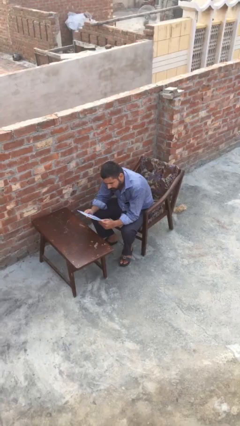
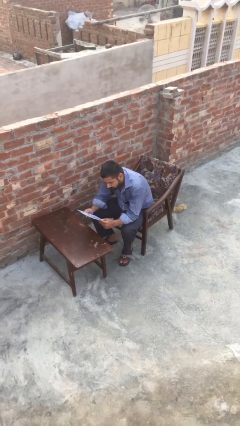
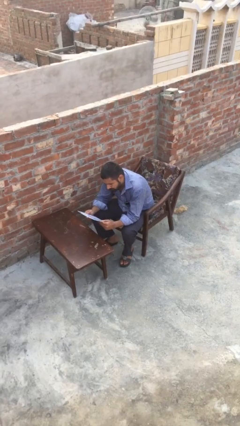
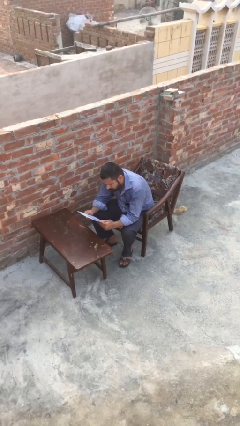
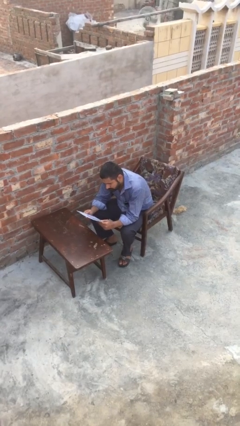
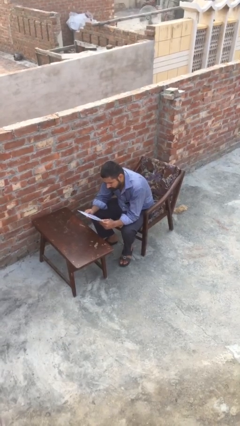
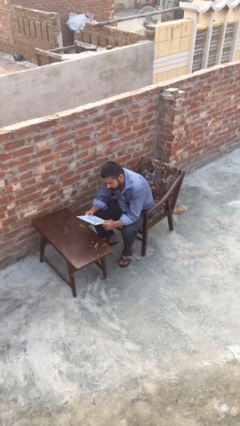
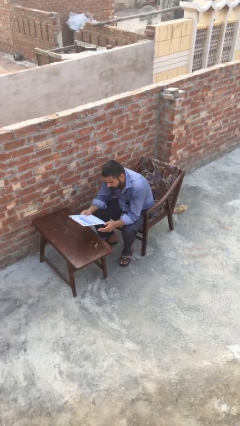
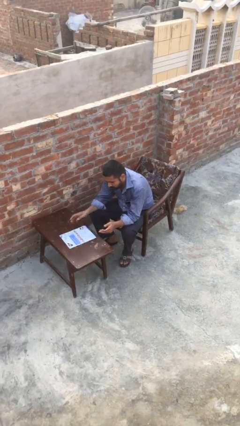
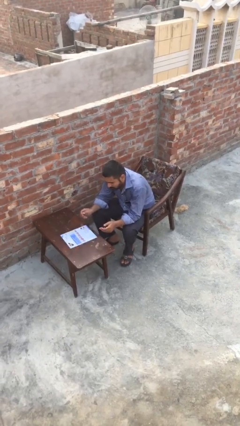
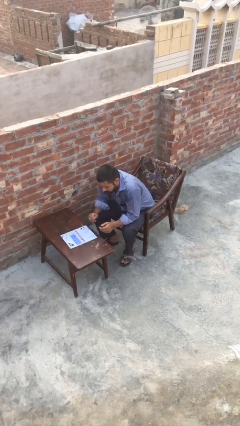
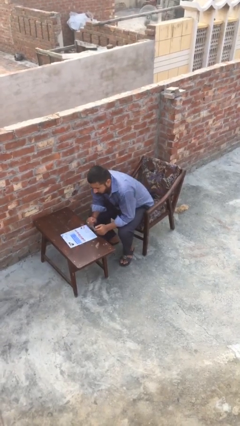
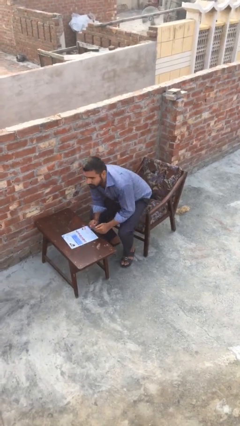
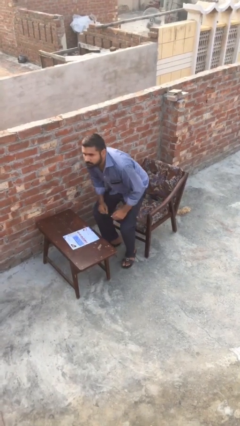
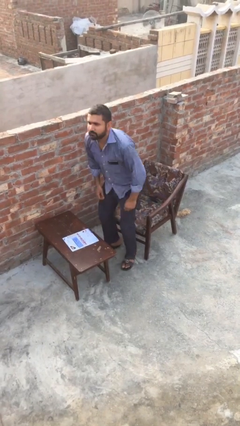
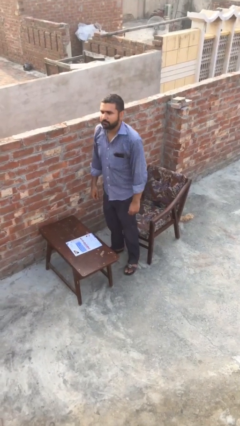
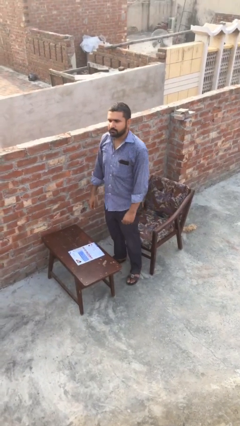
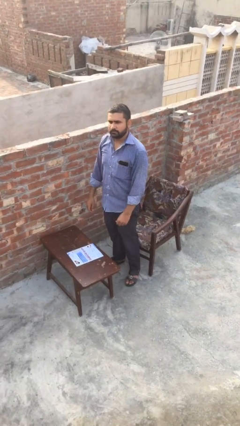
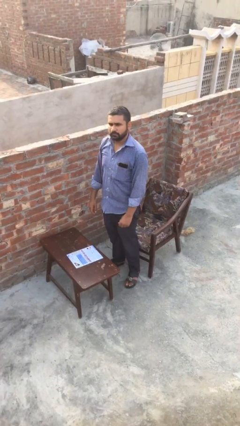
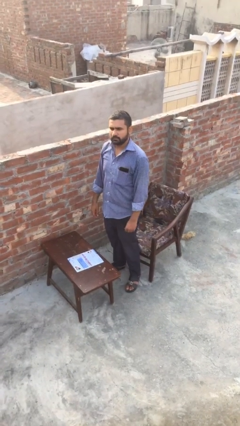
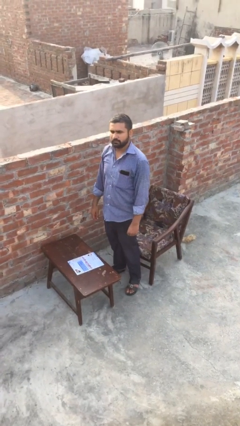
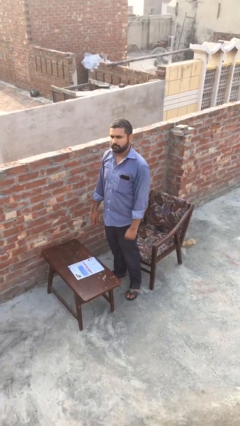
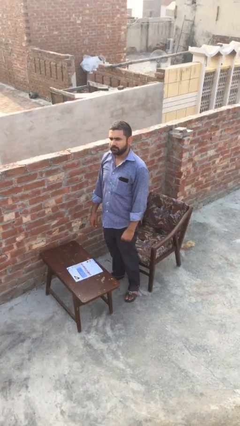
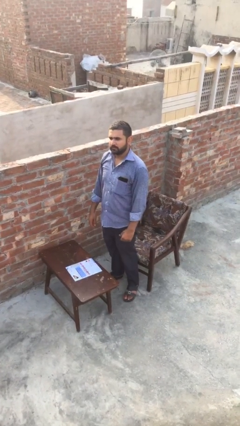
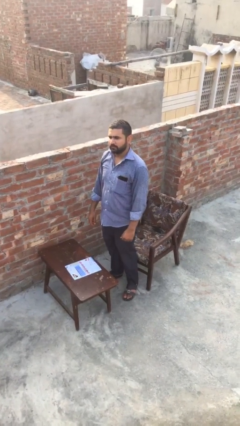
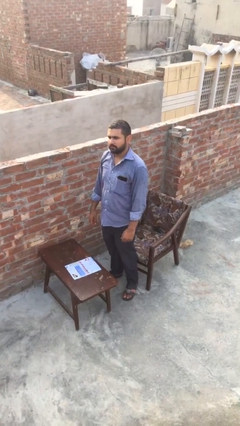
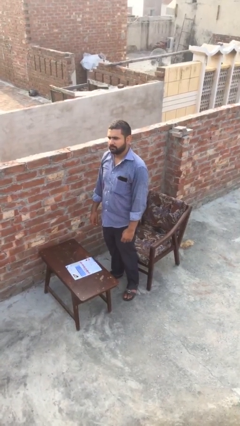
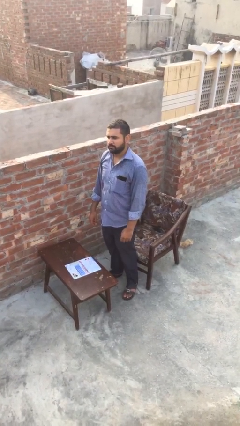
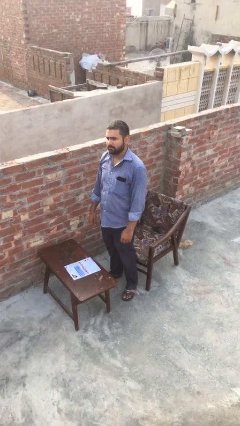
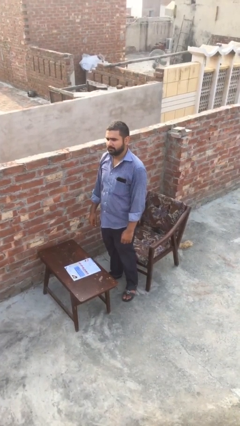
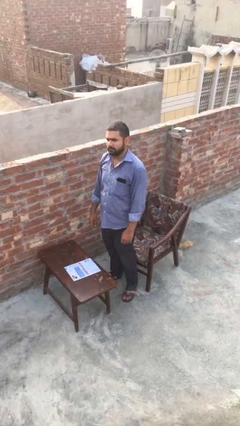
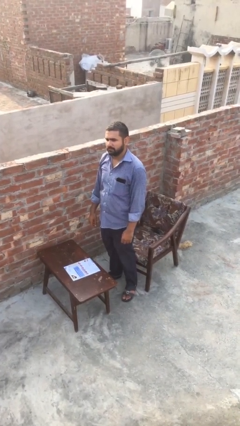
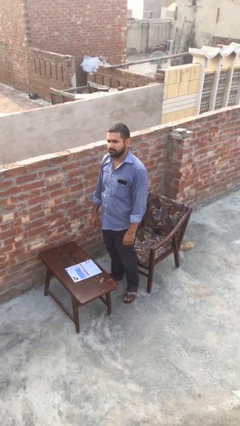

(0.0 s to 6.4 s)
person stands up

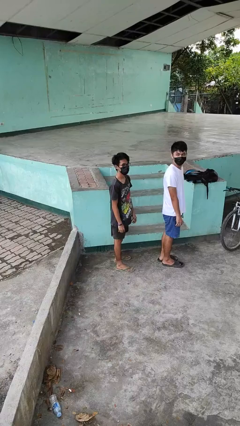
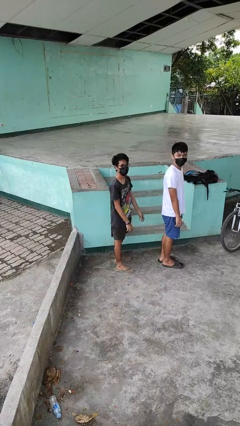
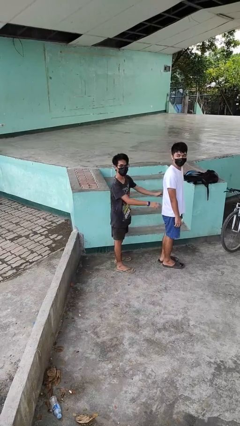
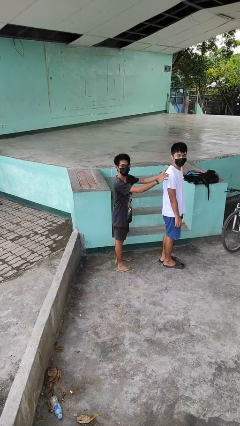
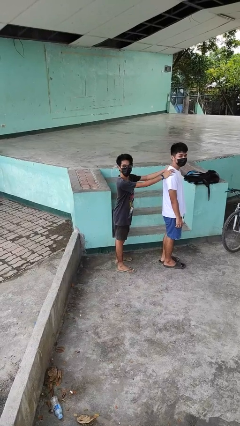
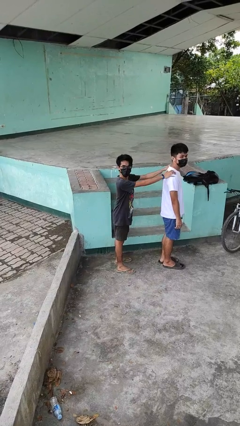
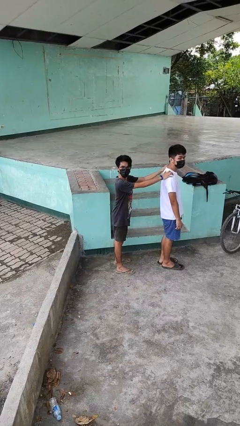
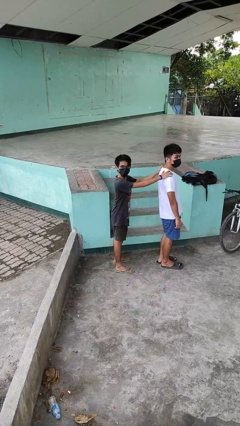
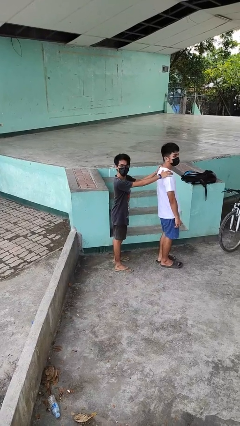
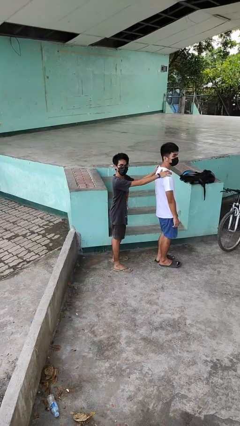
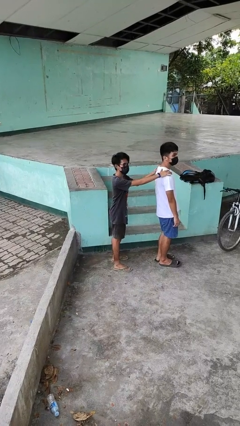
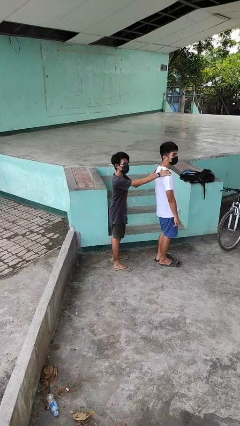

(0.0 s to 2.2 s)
person grabs person by shoulder

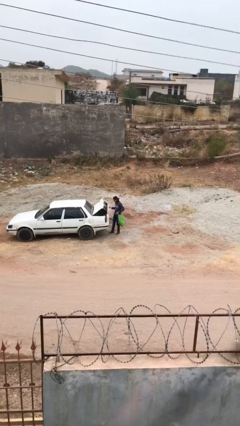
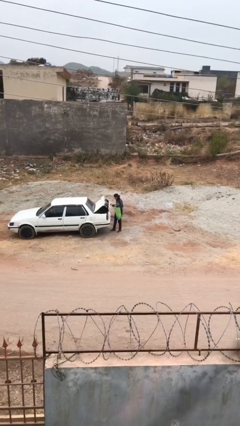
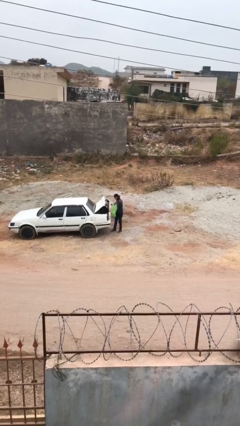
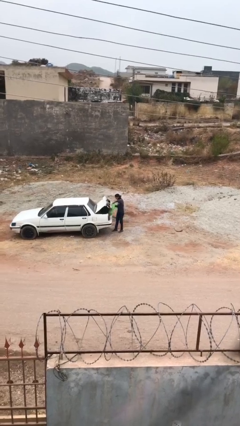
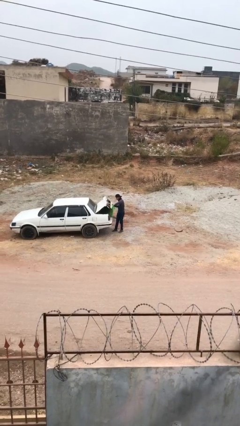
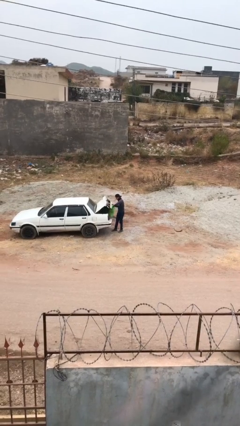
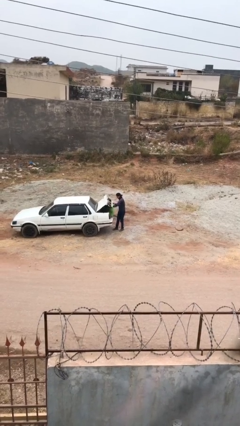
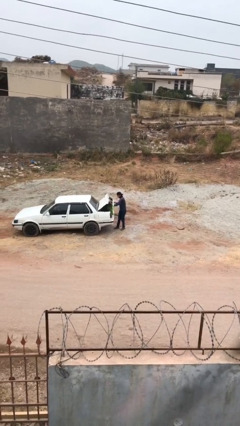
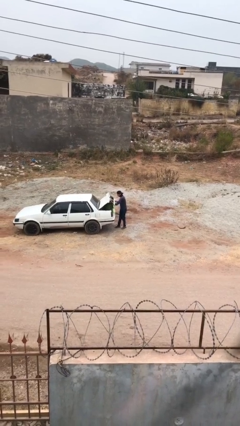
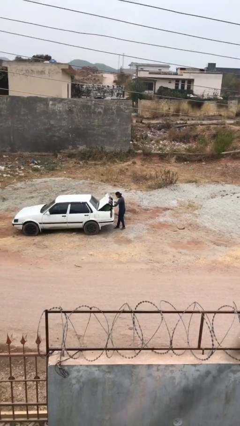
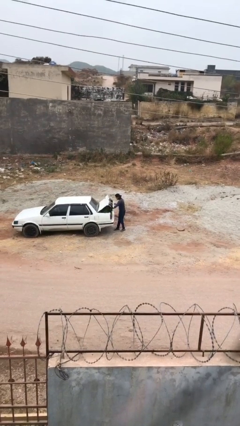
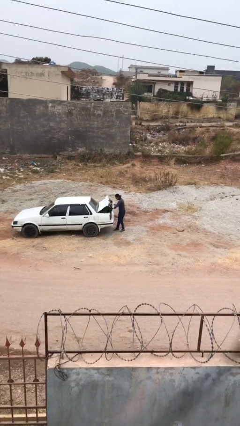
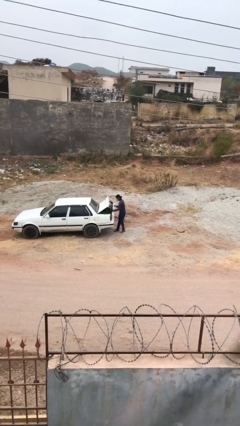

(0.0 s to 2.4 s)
person loads car

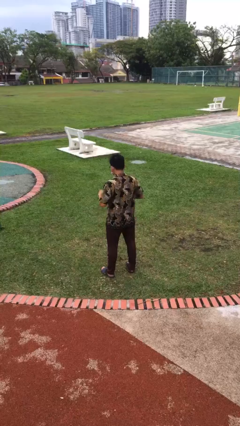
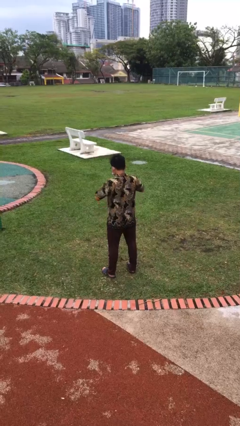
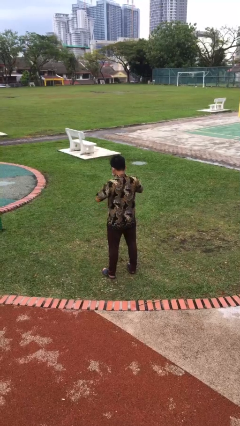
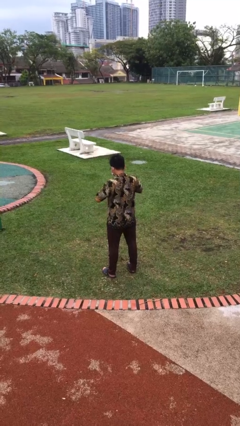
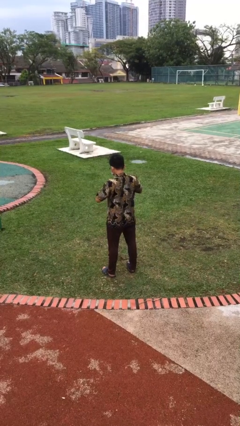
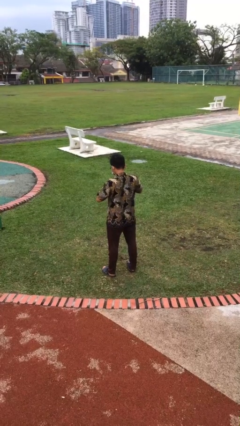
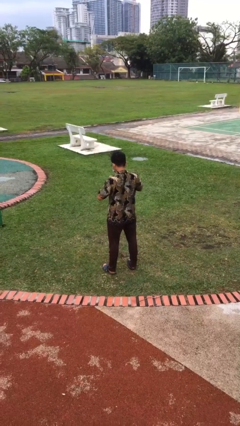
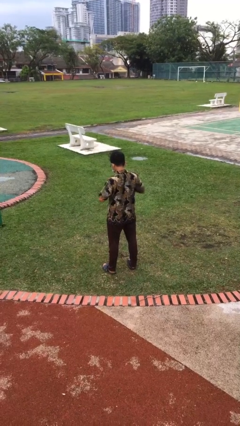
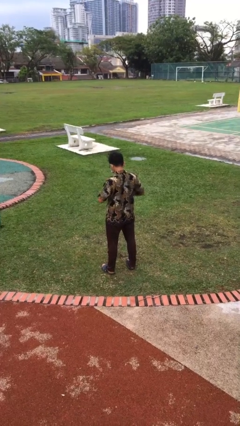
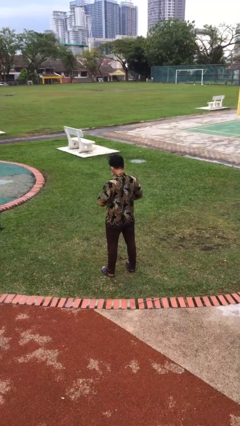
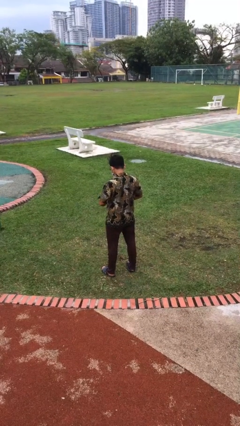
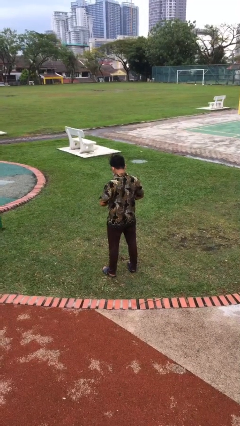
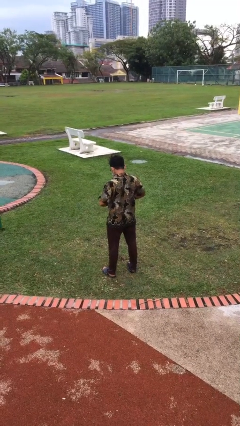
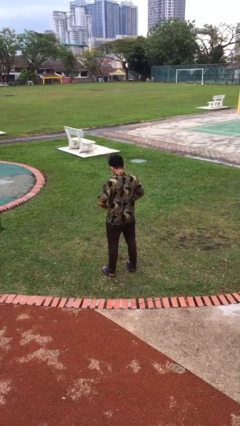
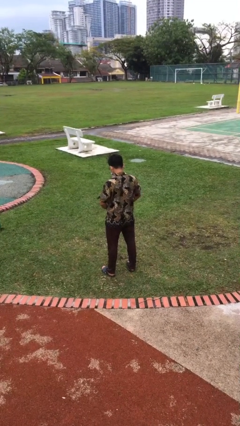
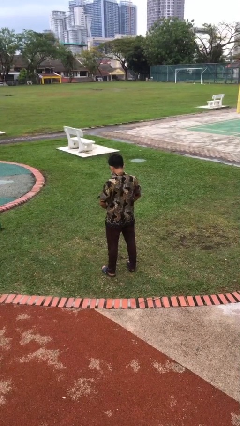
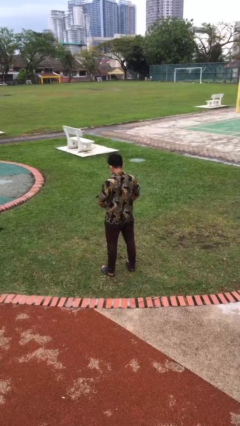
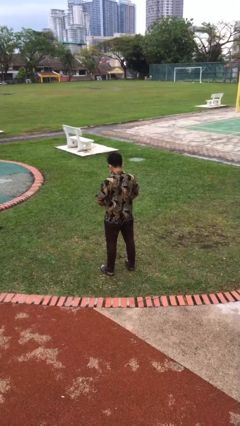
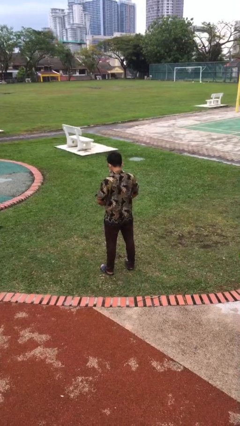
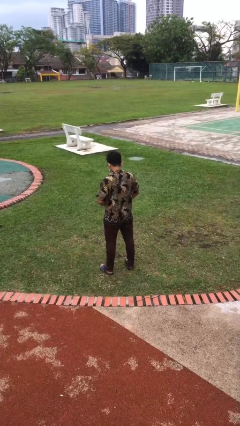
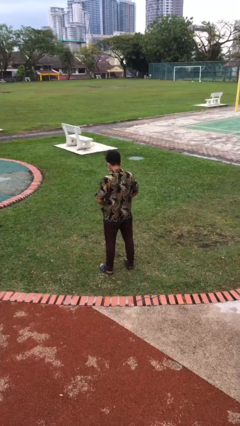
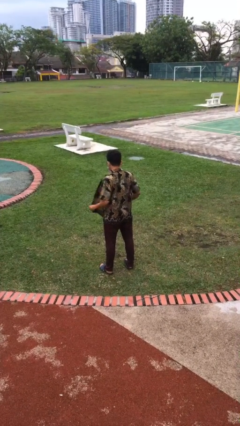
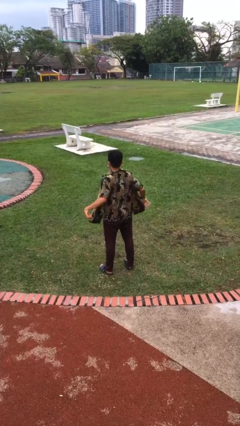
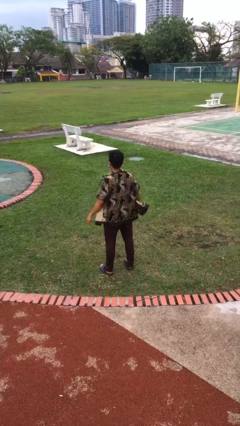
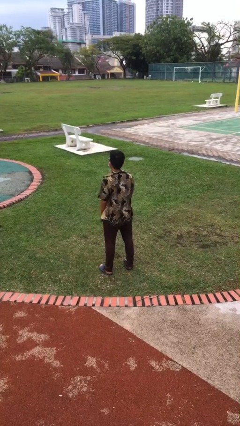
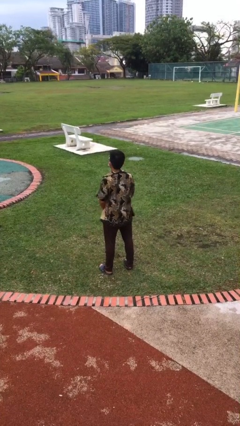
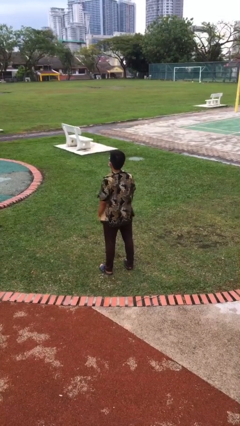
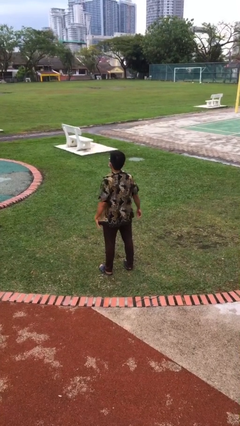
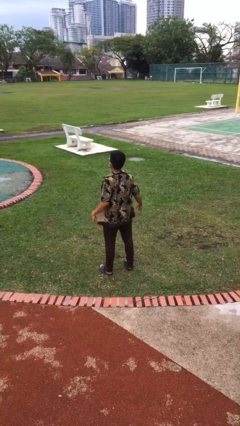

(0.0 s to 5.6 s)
person unbuttons shirt

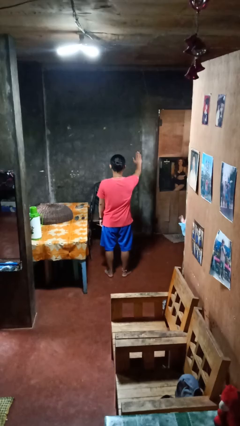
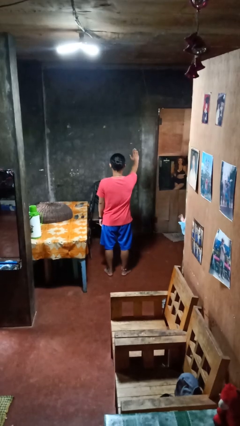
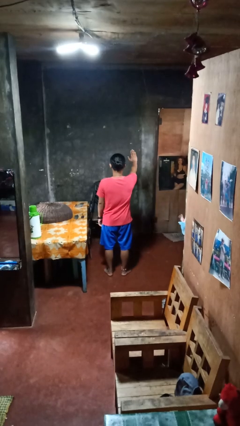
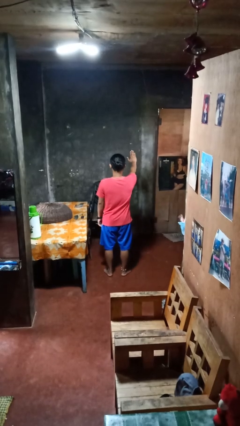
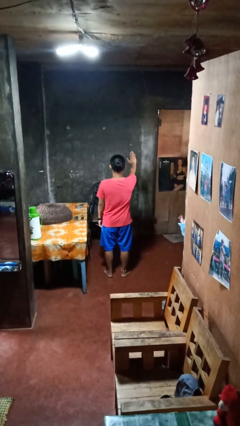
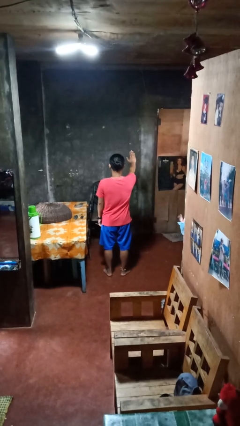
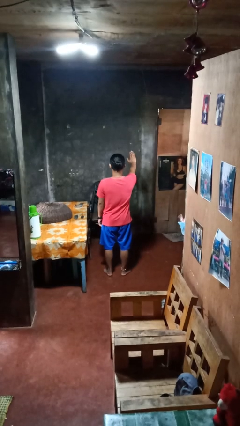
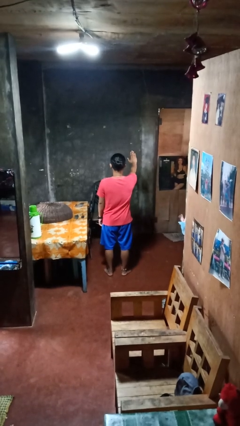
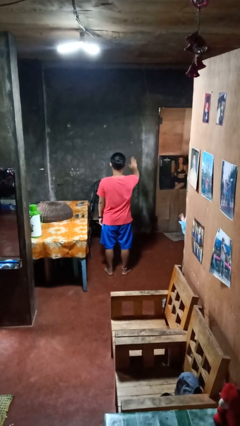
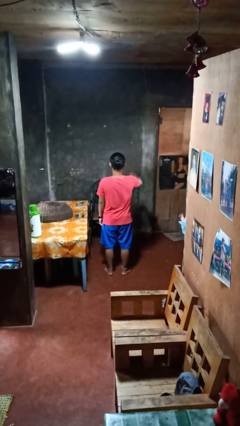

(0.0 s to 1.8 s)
person gestures stop
